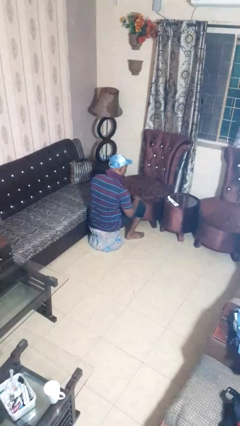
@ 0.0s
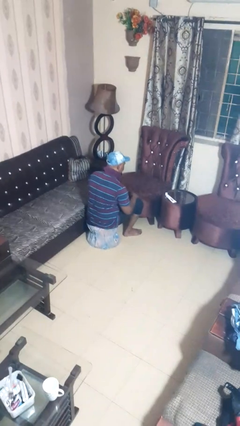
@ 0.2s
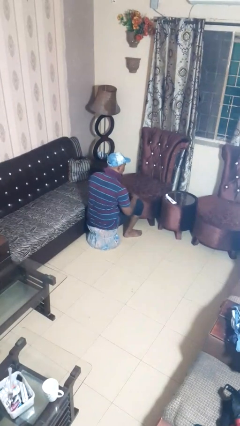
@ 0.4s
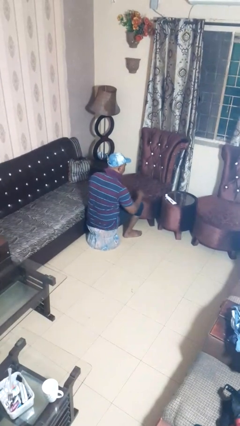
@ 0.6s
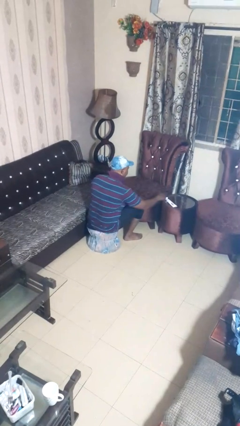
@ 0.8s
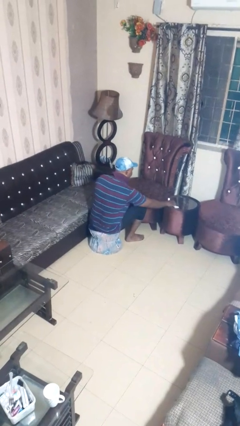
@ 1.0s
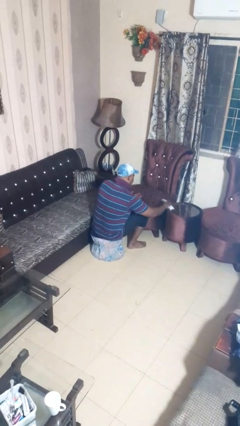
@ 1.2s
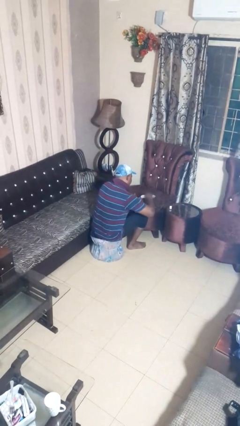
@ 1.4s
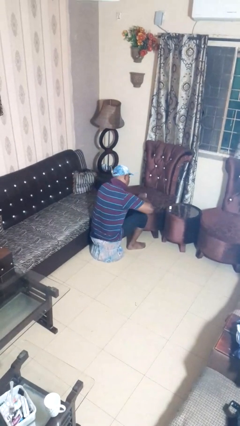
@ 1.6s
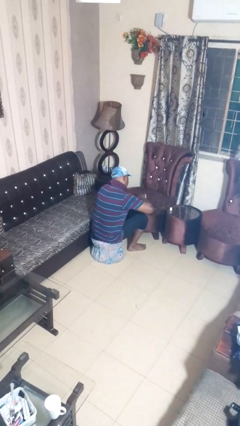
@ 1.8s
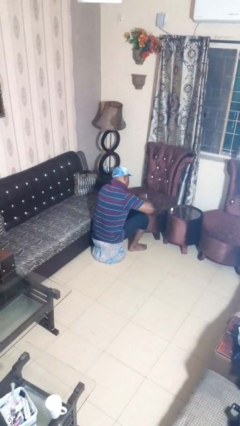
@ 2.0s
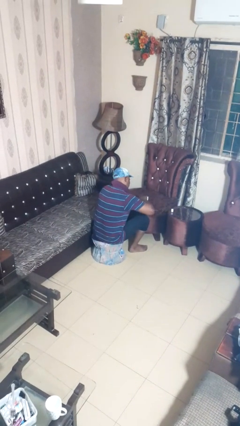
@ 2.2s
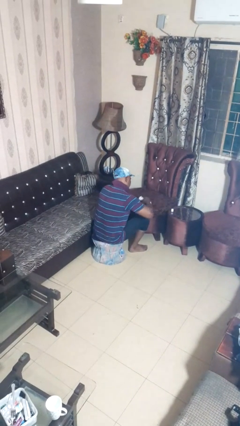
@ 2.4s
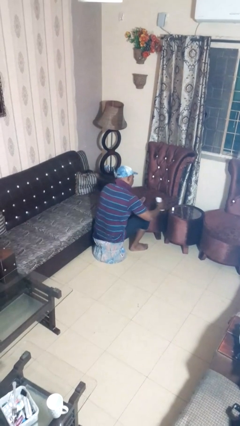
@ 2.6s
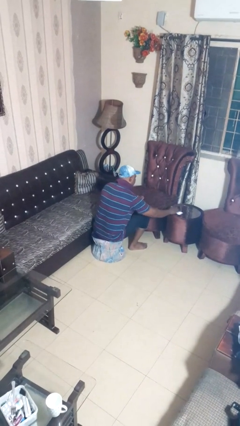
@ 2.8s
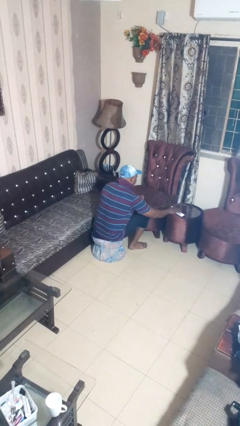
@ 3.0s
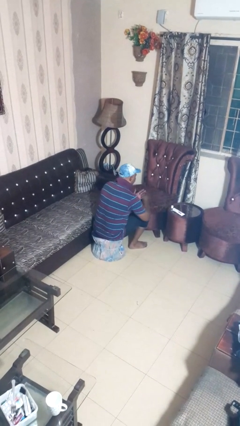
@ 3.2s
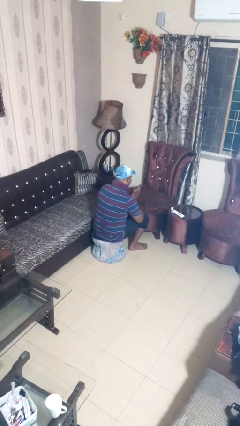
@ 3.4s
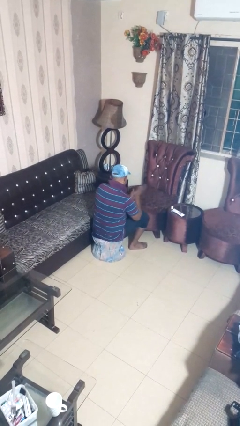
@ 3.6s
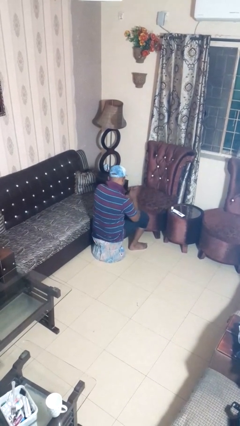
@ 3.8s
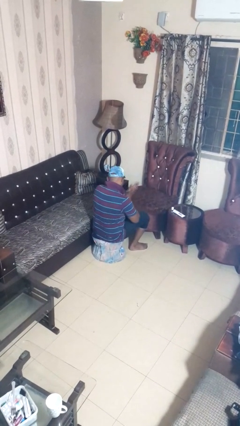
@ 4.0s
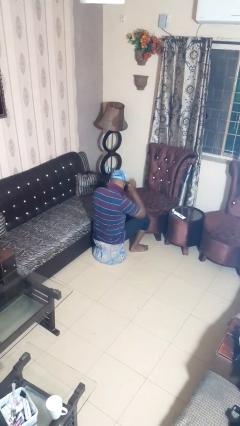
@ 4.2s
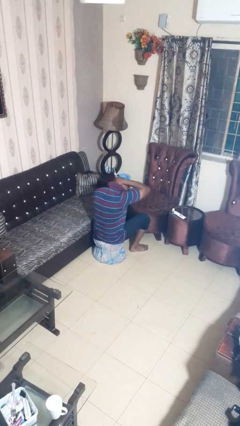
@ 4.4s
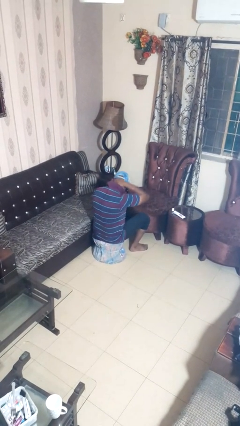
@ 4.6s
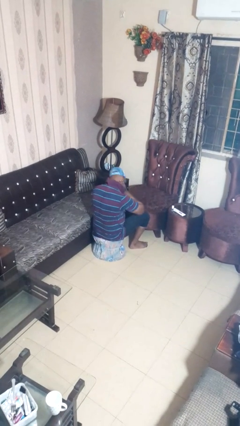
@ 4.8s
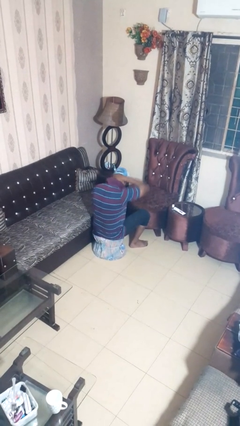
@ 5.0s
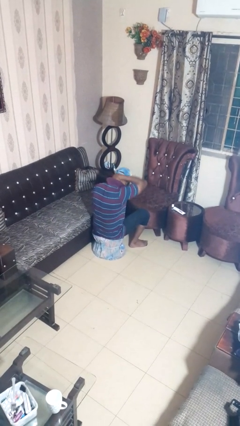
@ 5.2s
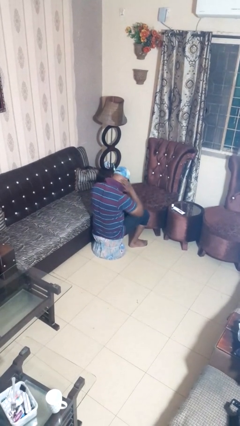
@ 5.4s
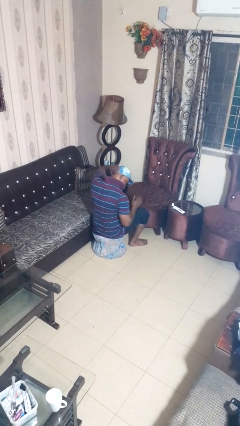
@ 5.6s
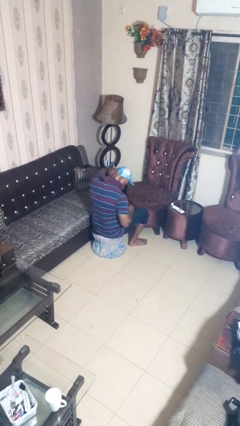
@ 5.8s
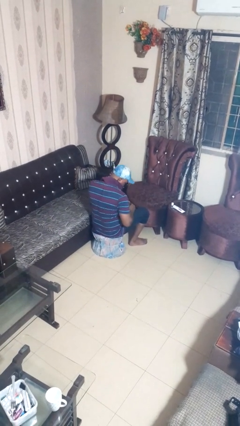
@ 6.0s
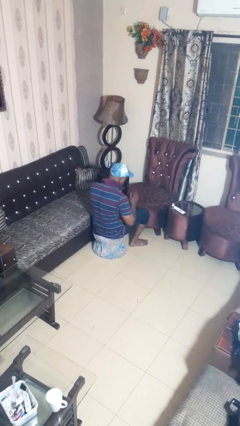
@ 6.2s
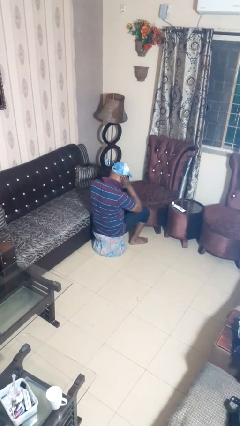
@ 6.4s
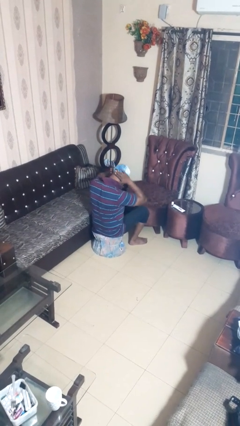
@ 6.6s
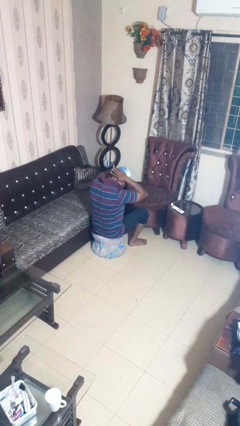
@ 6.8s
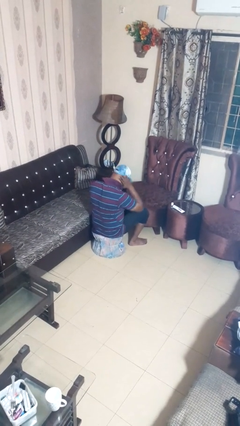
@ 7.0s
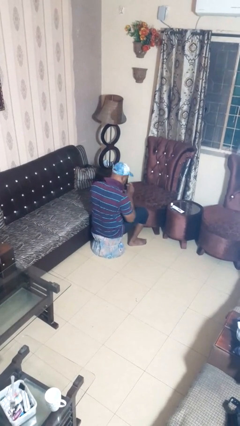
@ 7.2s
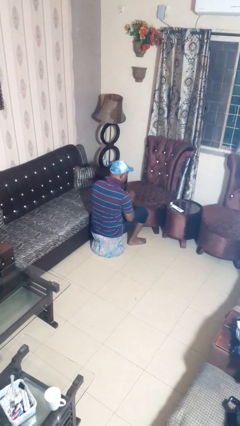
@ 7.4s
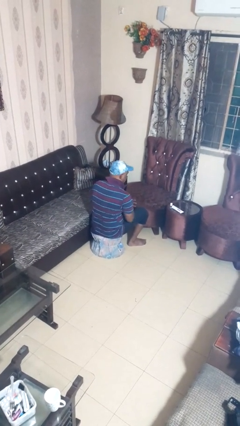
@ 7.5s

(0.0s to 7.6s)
person applies sunscreen

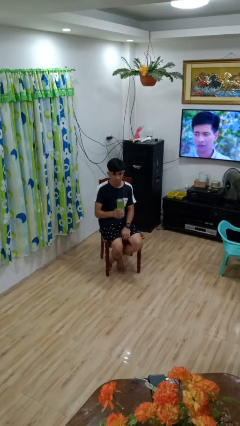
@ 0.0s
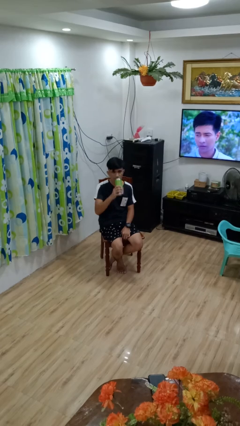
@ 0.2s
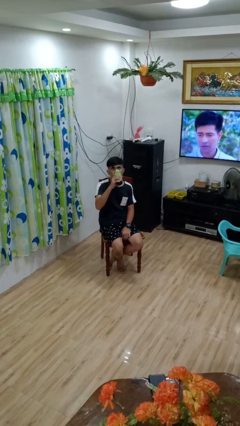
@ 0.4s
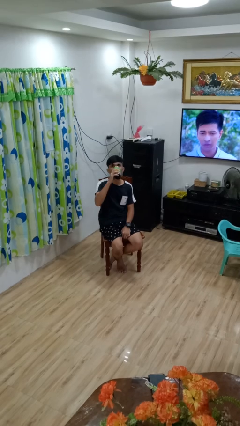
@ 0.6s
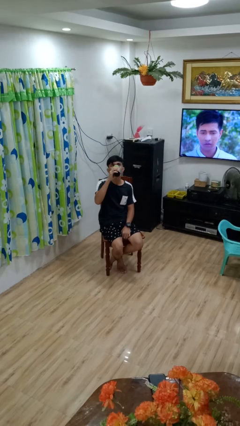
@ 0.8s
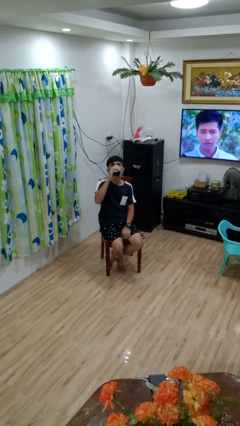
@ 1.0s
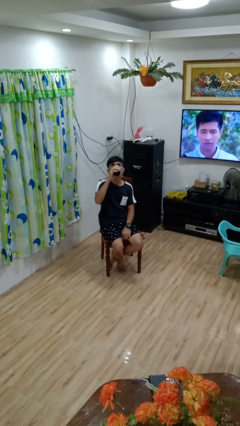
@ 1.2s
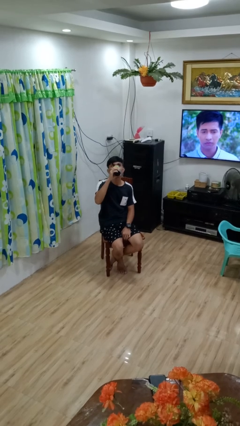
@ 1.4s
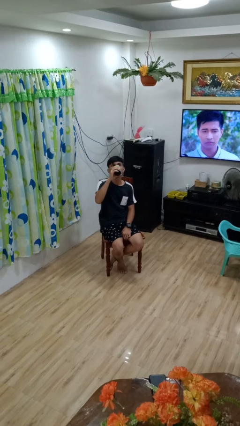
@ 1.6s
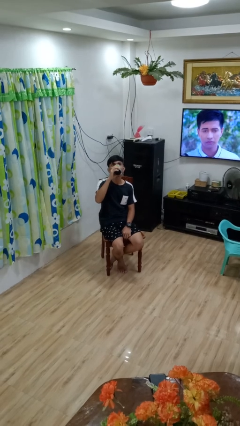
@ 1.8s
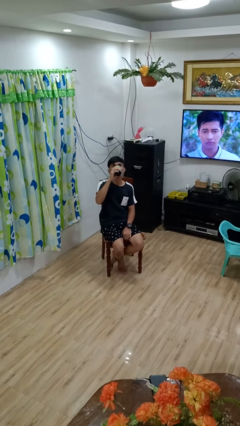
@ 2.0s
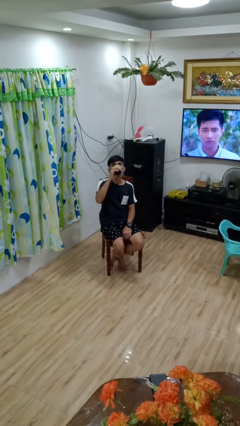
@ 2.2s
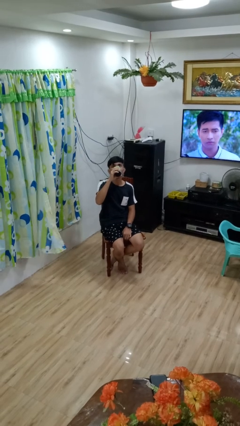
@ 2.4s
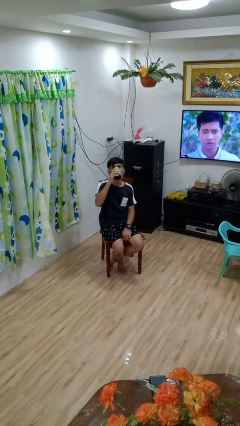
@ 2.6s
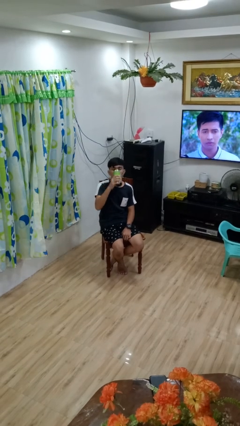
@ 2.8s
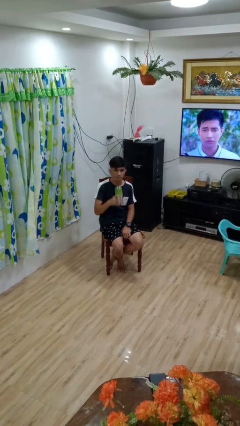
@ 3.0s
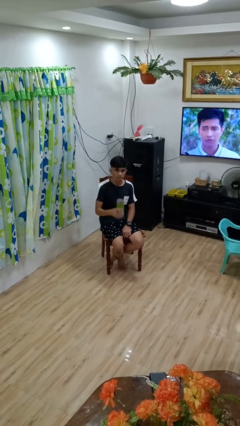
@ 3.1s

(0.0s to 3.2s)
person drinks from bottle

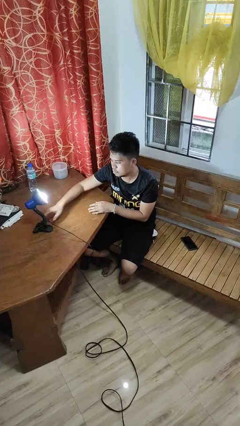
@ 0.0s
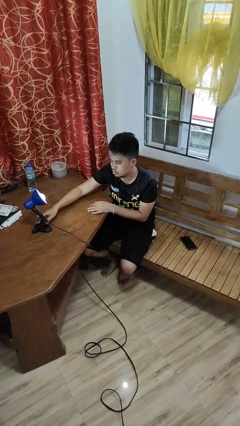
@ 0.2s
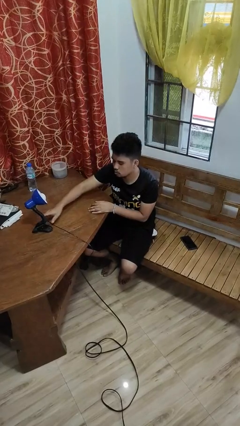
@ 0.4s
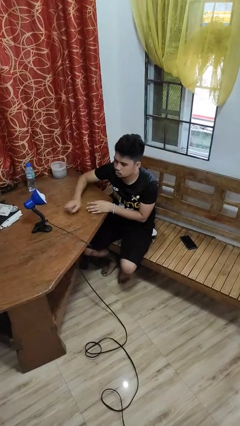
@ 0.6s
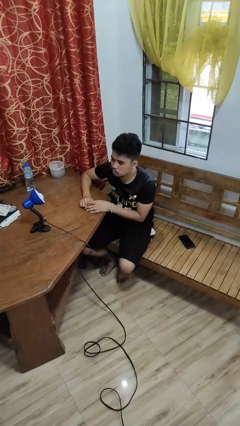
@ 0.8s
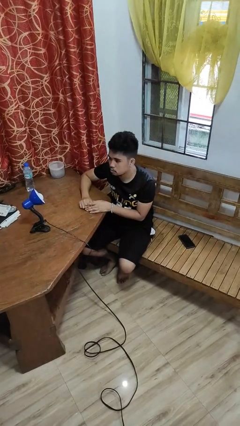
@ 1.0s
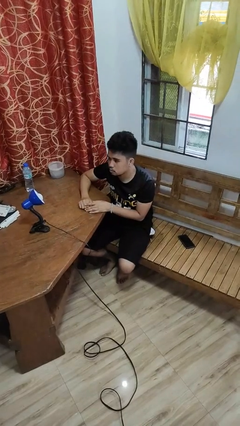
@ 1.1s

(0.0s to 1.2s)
person turns off lamp

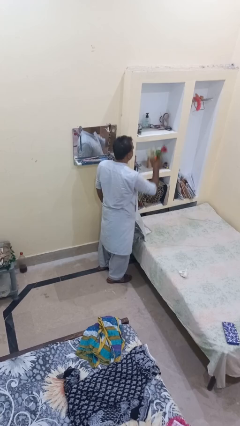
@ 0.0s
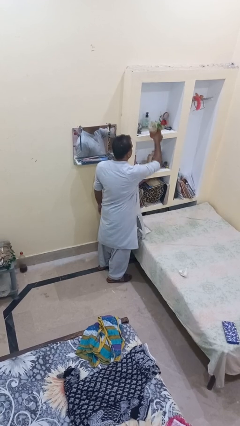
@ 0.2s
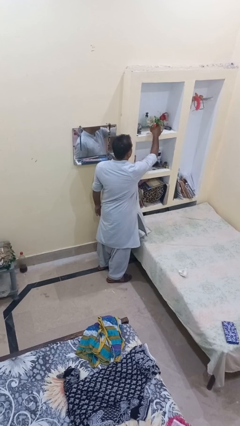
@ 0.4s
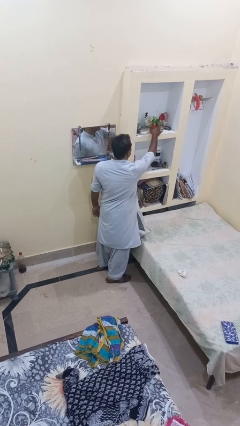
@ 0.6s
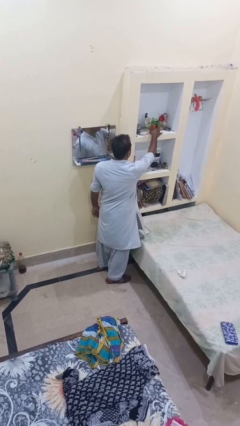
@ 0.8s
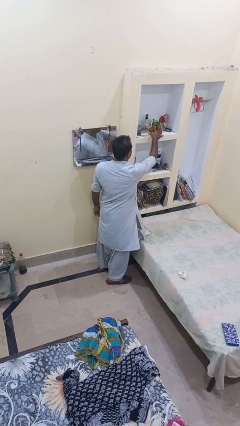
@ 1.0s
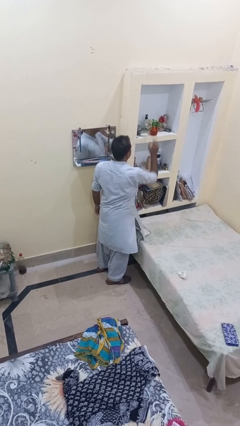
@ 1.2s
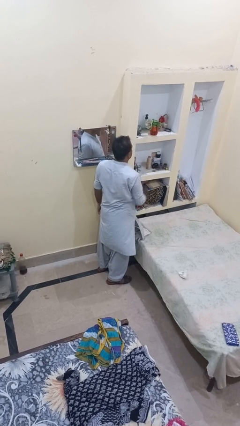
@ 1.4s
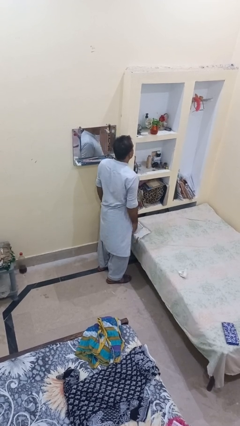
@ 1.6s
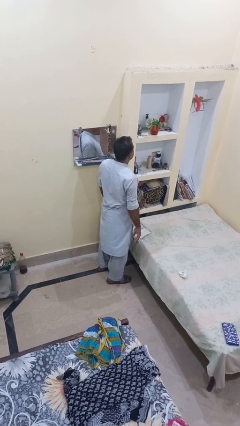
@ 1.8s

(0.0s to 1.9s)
person puts down object on shelf

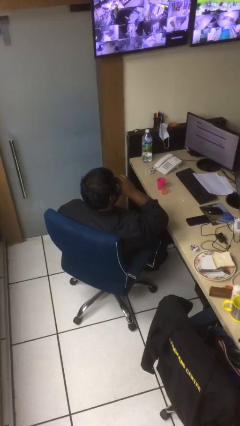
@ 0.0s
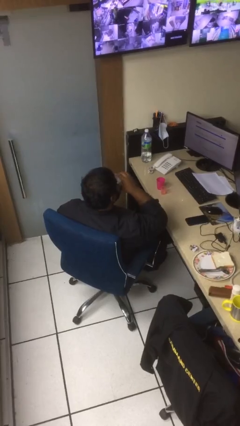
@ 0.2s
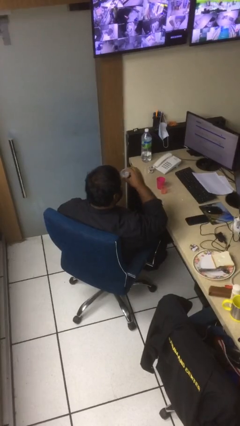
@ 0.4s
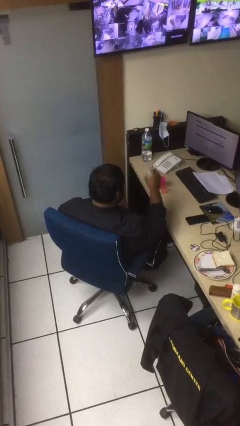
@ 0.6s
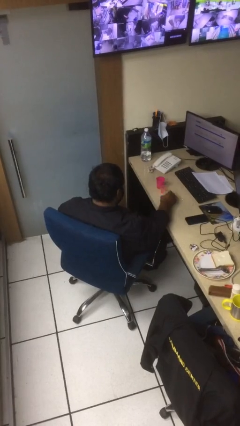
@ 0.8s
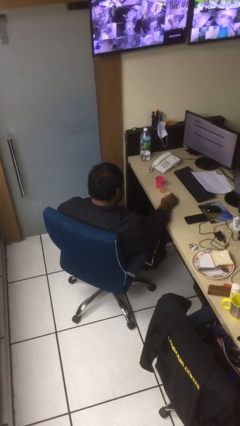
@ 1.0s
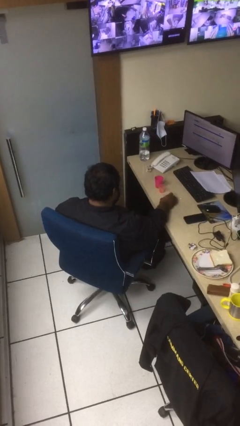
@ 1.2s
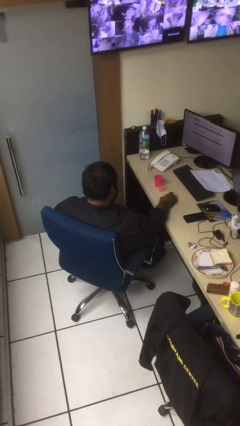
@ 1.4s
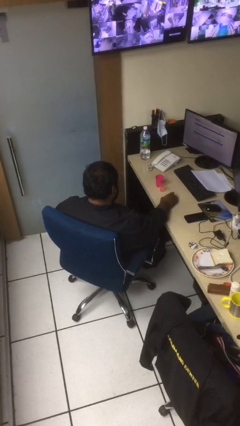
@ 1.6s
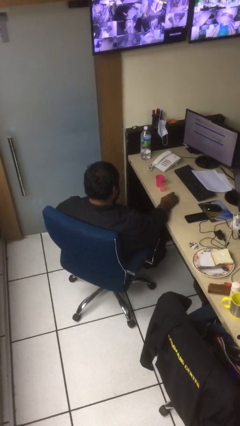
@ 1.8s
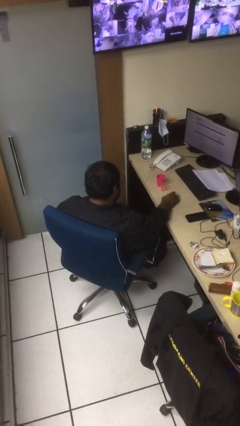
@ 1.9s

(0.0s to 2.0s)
person puts down object on table

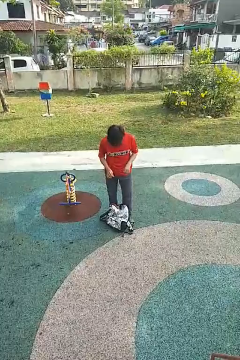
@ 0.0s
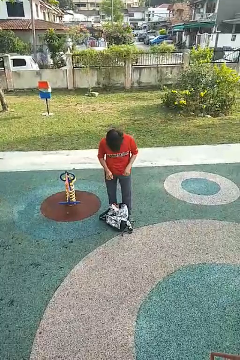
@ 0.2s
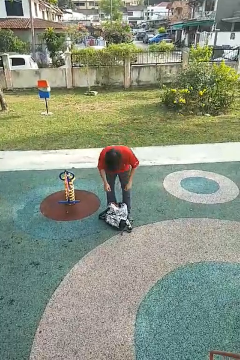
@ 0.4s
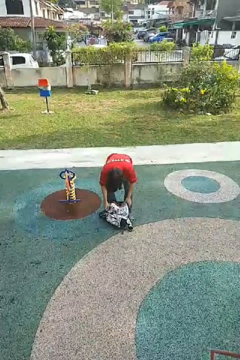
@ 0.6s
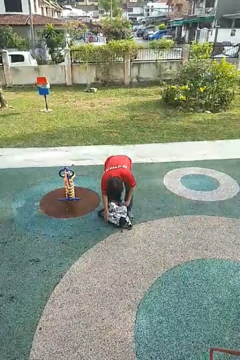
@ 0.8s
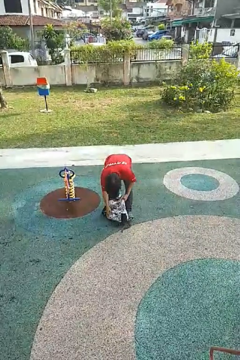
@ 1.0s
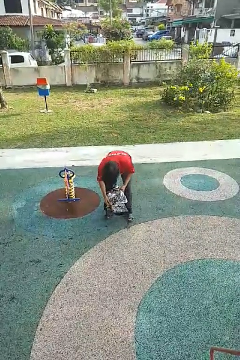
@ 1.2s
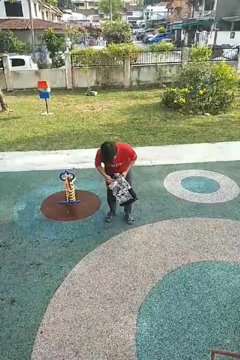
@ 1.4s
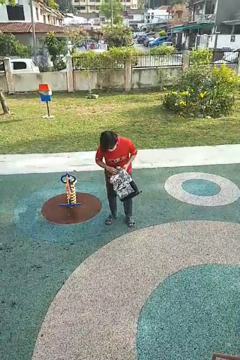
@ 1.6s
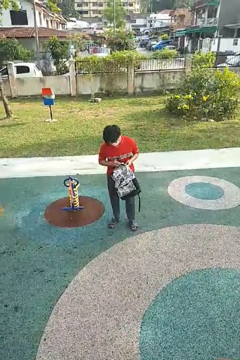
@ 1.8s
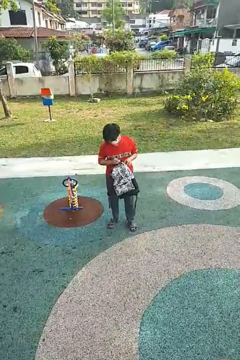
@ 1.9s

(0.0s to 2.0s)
person picks up object from floor
